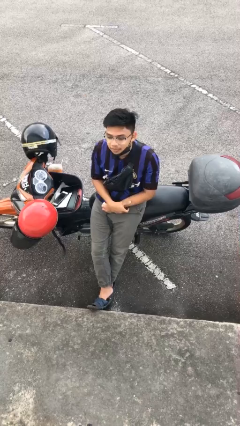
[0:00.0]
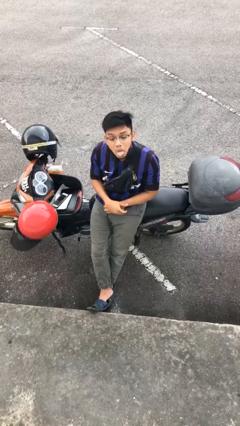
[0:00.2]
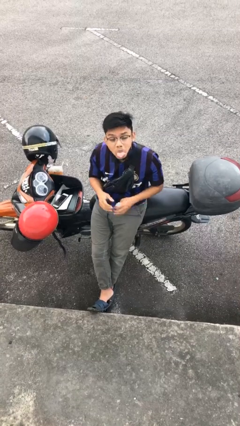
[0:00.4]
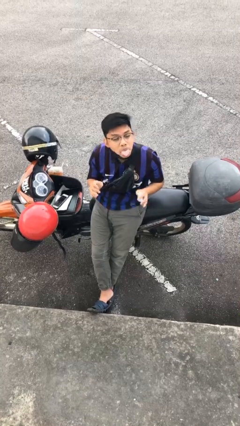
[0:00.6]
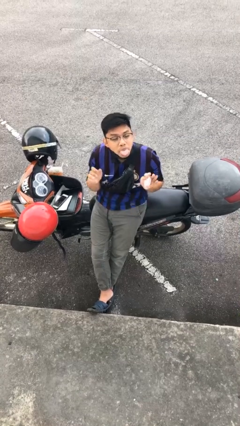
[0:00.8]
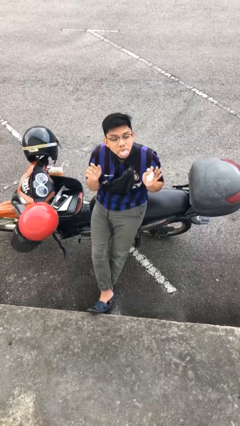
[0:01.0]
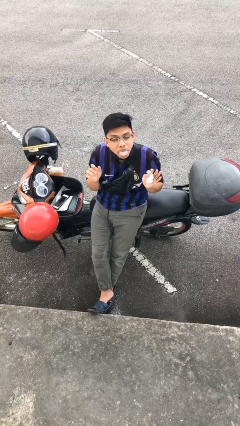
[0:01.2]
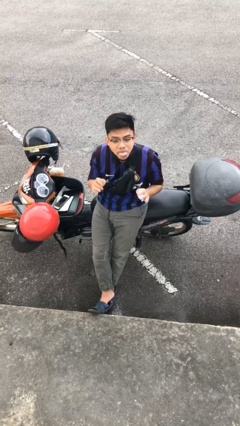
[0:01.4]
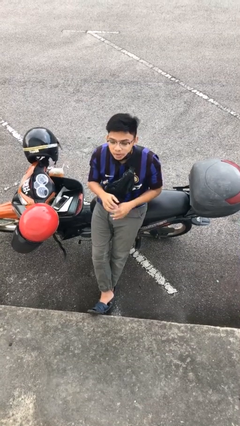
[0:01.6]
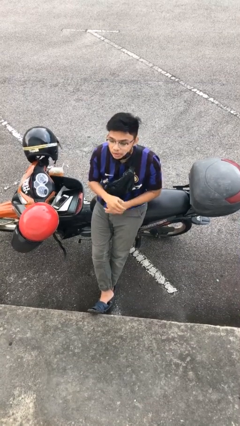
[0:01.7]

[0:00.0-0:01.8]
person sticks out tongue

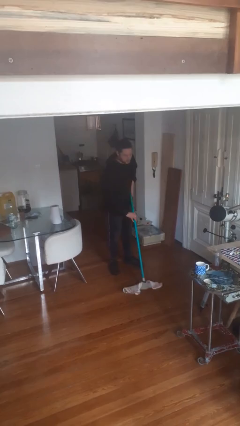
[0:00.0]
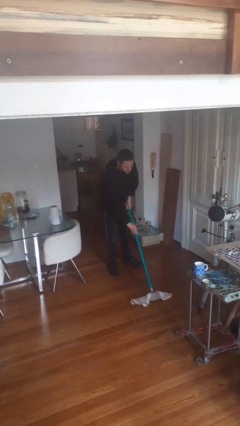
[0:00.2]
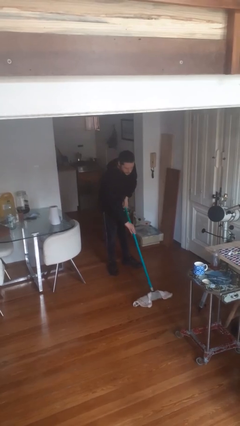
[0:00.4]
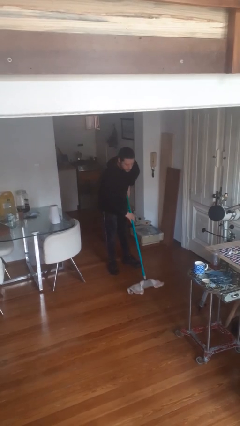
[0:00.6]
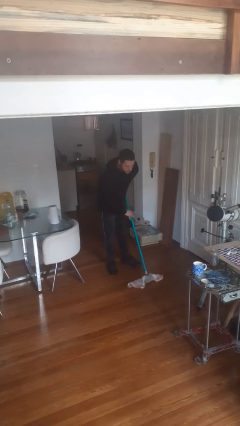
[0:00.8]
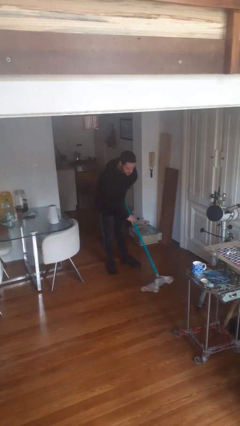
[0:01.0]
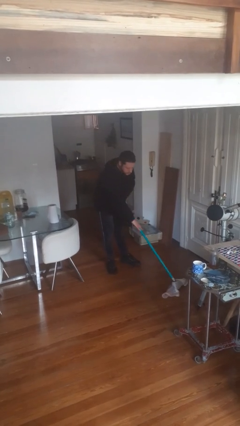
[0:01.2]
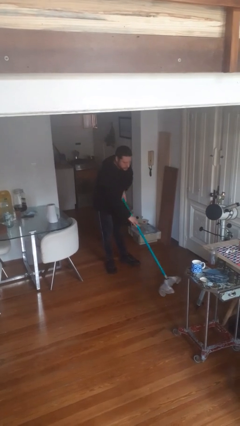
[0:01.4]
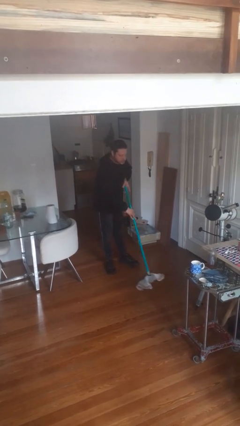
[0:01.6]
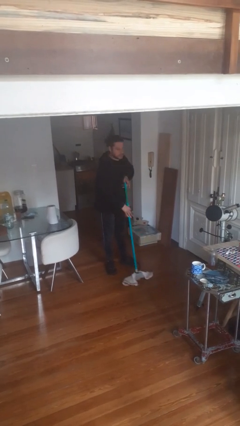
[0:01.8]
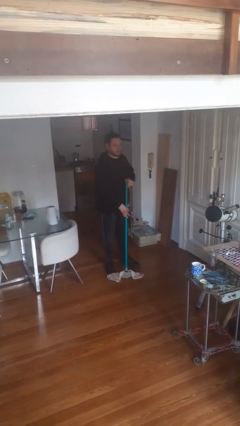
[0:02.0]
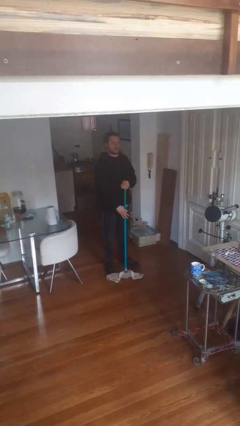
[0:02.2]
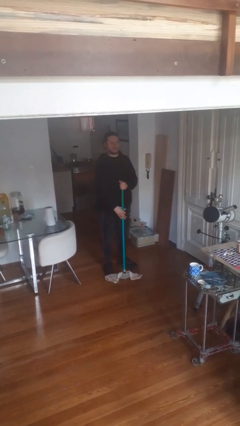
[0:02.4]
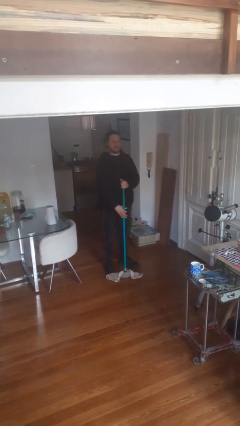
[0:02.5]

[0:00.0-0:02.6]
person mops

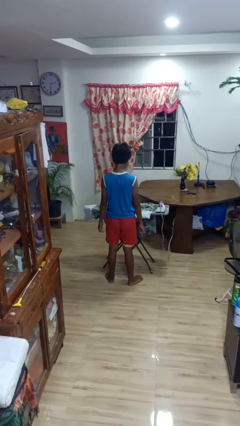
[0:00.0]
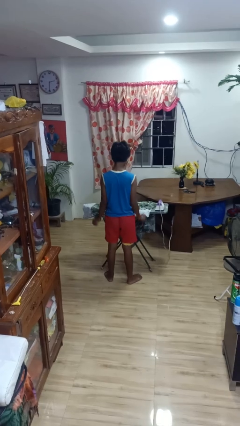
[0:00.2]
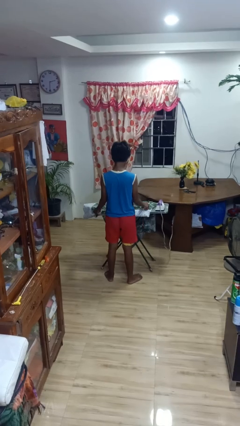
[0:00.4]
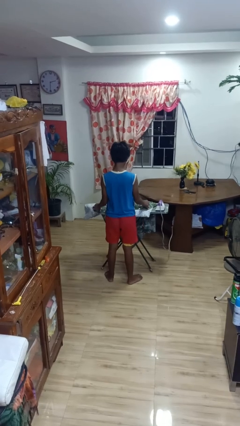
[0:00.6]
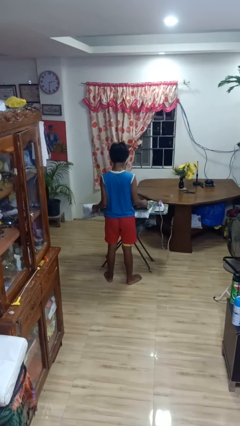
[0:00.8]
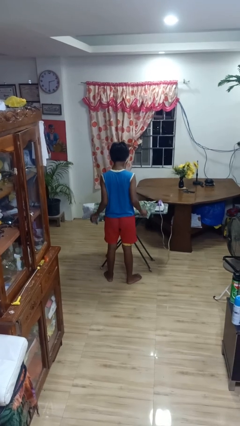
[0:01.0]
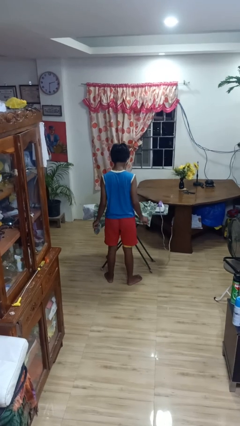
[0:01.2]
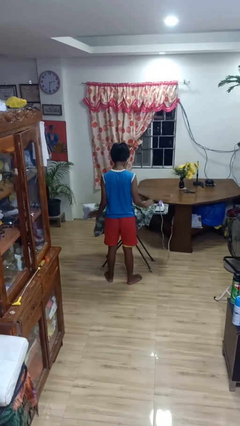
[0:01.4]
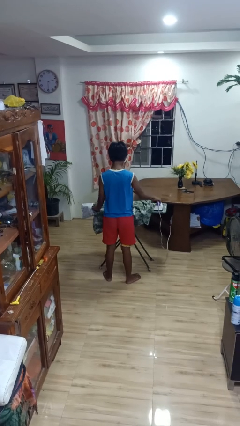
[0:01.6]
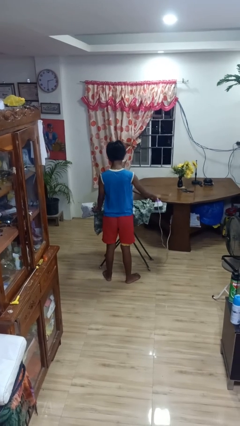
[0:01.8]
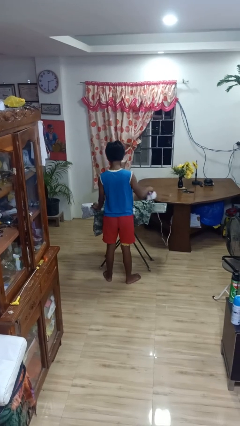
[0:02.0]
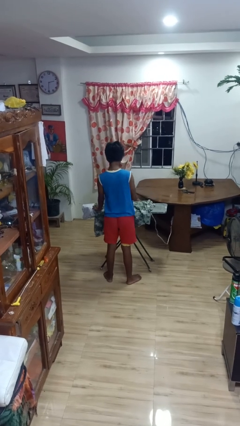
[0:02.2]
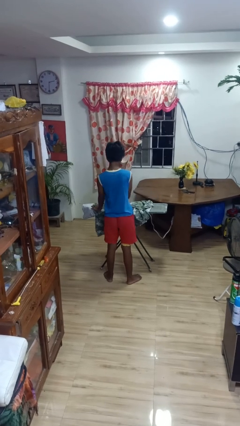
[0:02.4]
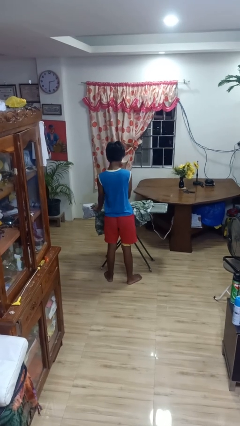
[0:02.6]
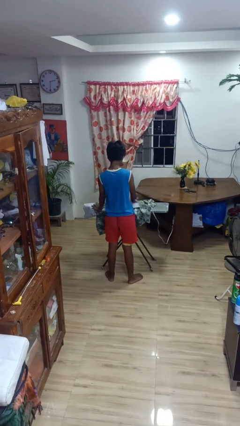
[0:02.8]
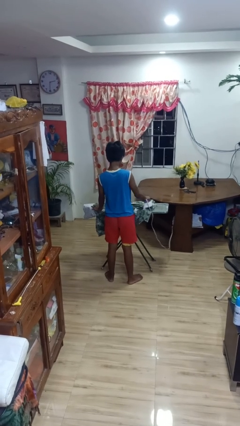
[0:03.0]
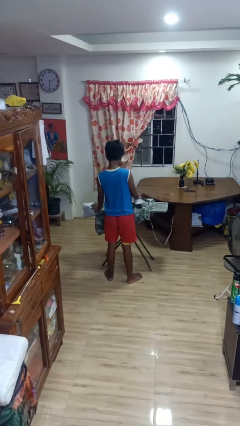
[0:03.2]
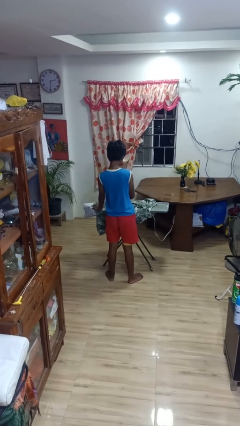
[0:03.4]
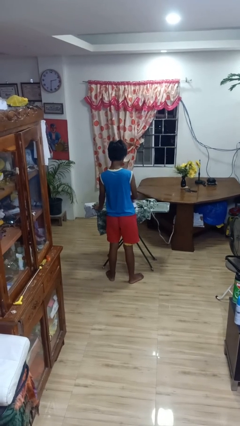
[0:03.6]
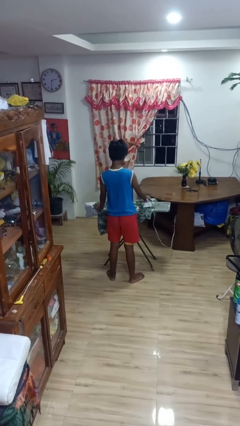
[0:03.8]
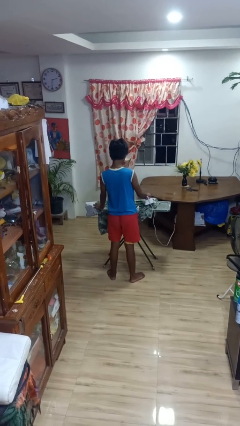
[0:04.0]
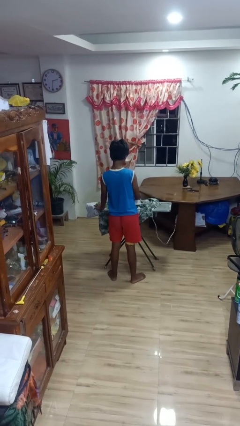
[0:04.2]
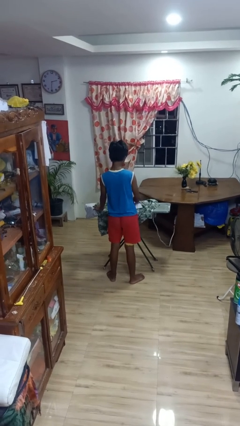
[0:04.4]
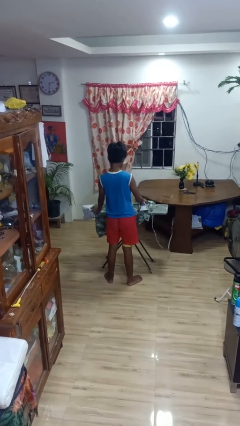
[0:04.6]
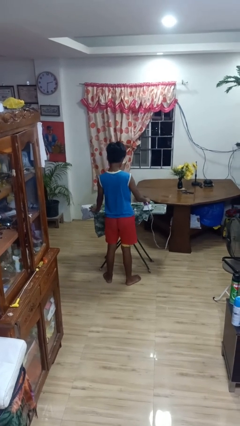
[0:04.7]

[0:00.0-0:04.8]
person irons clothes

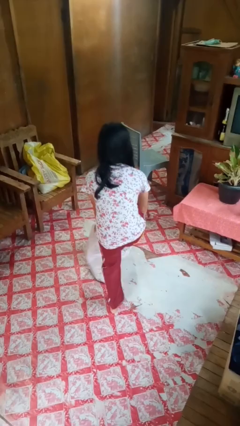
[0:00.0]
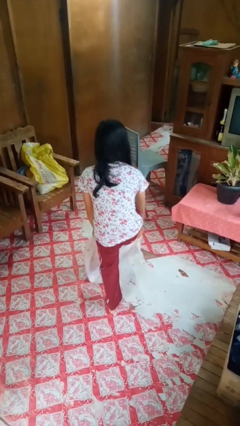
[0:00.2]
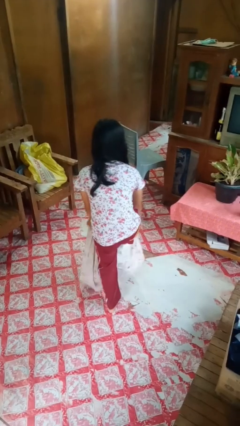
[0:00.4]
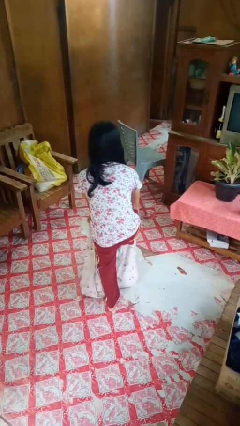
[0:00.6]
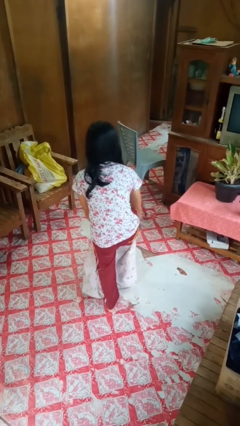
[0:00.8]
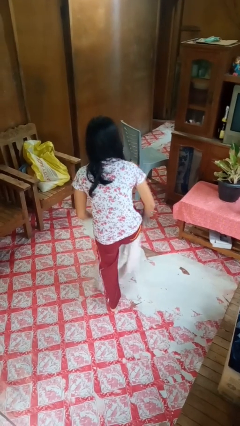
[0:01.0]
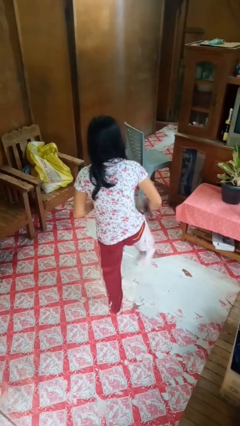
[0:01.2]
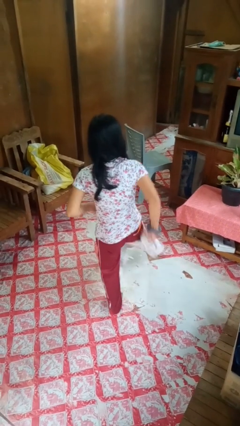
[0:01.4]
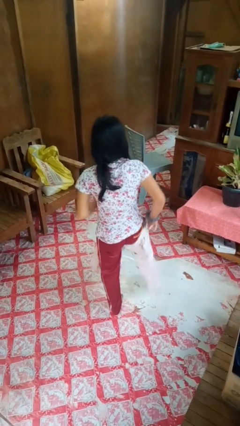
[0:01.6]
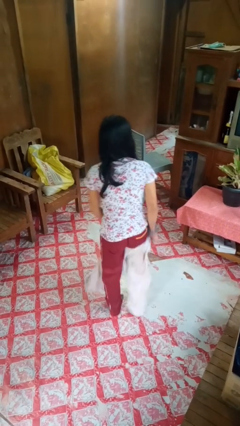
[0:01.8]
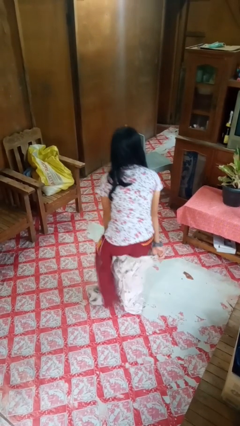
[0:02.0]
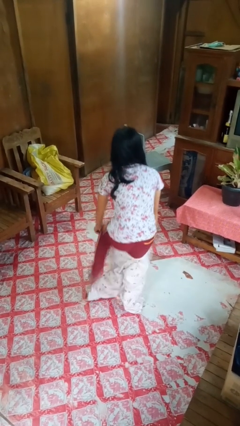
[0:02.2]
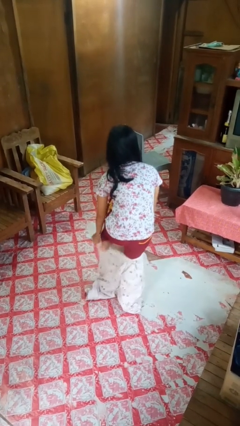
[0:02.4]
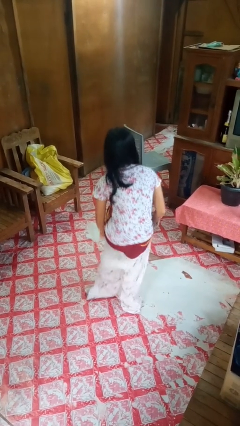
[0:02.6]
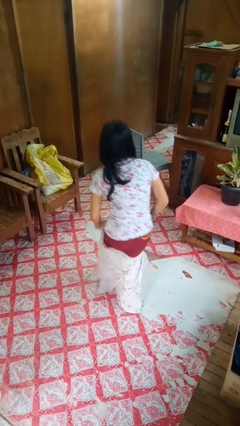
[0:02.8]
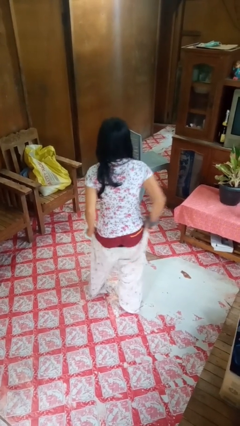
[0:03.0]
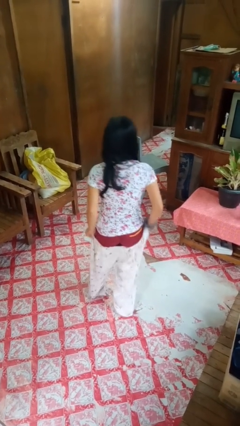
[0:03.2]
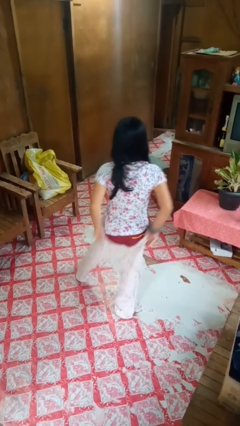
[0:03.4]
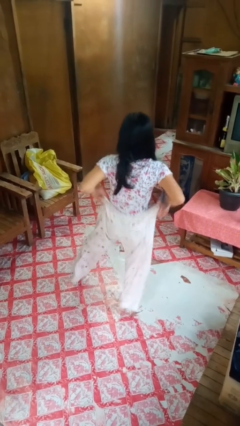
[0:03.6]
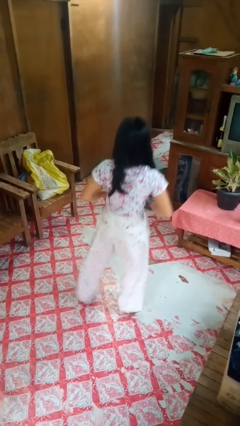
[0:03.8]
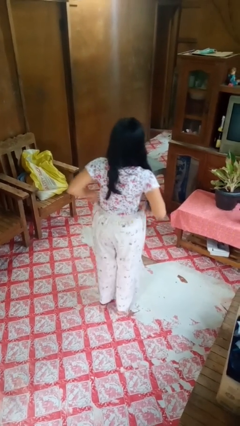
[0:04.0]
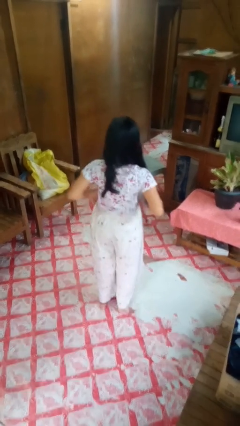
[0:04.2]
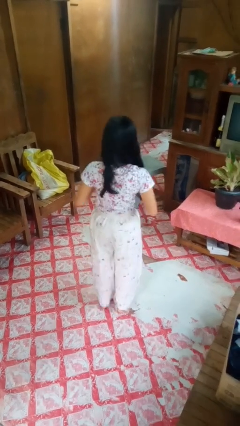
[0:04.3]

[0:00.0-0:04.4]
person puts on pants

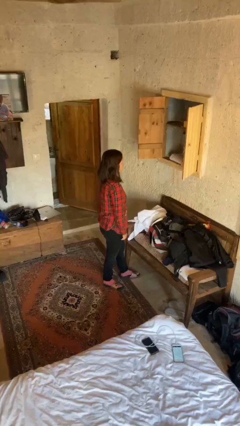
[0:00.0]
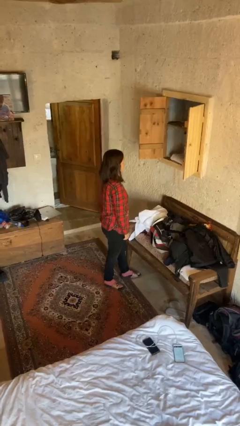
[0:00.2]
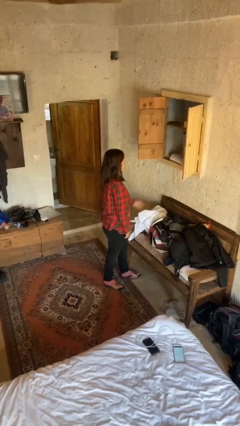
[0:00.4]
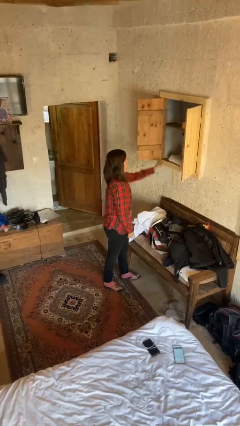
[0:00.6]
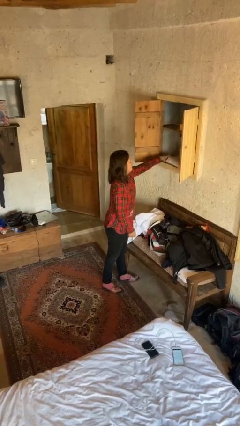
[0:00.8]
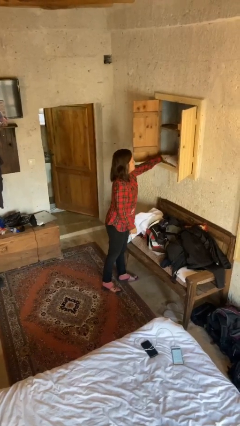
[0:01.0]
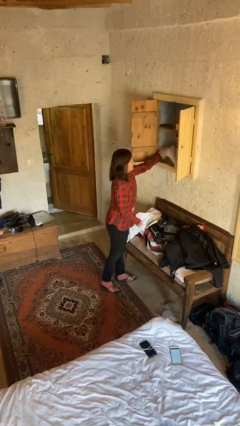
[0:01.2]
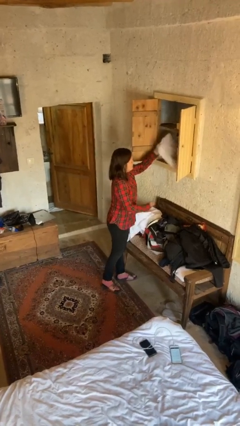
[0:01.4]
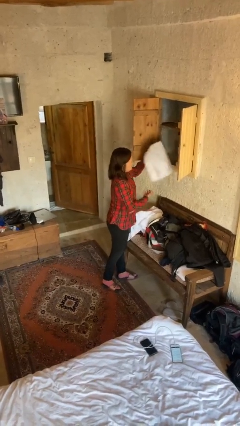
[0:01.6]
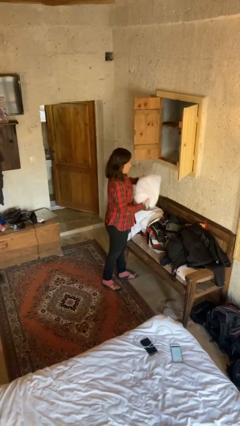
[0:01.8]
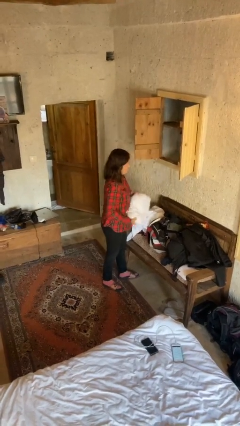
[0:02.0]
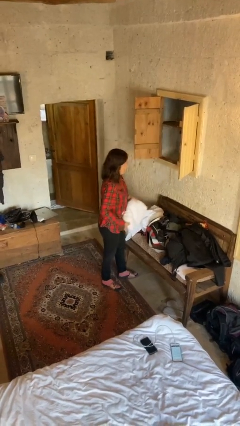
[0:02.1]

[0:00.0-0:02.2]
person takes clothes from dresser

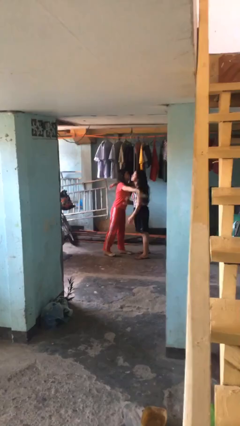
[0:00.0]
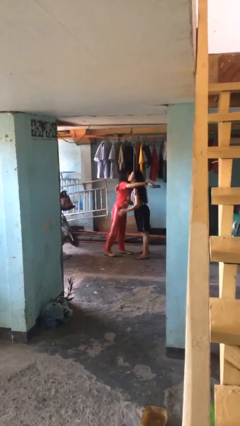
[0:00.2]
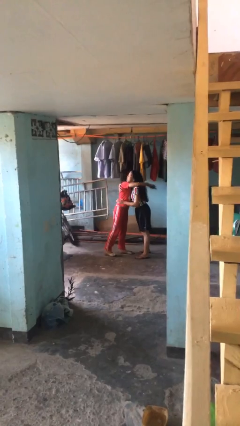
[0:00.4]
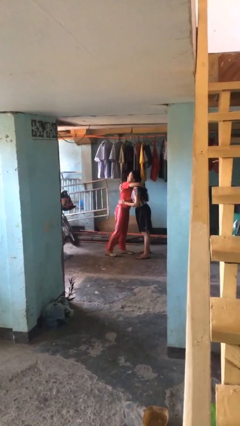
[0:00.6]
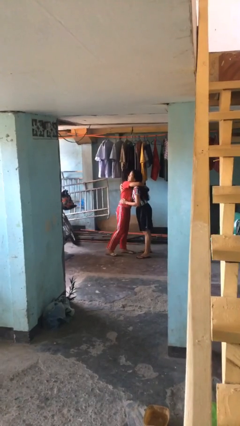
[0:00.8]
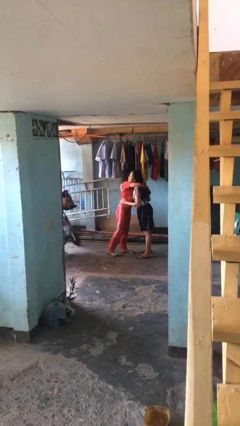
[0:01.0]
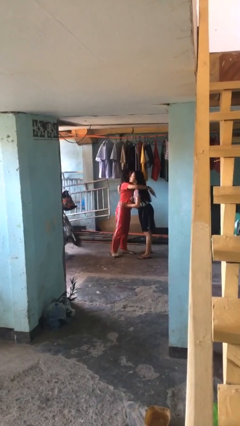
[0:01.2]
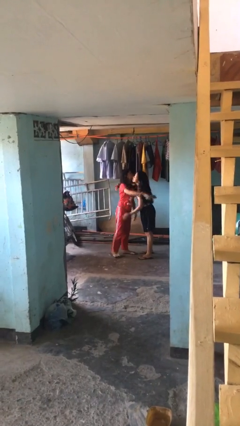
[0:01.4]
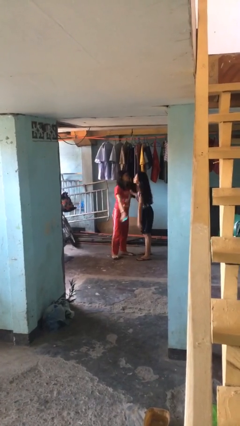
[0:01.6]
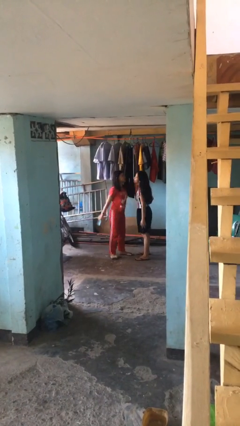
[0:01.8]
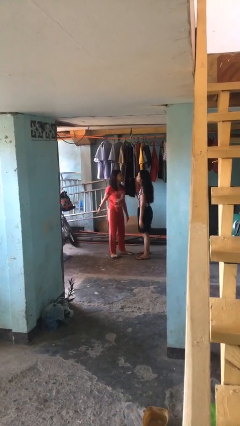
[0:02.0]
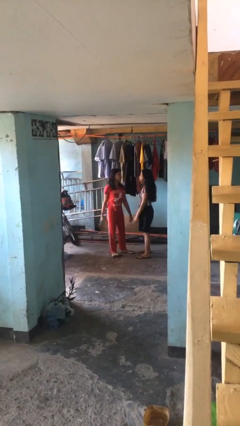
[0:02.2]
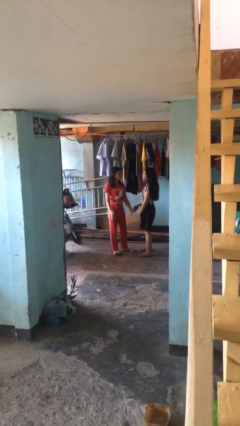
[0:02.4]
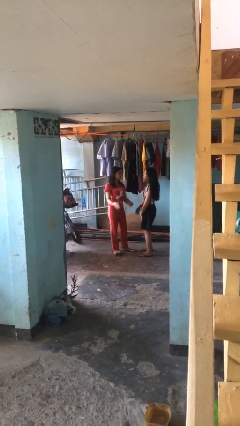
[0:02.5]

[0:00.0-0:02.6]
person embraces person
